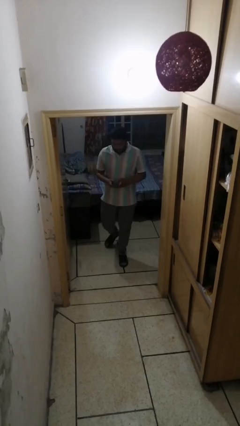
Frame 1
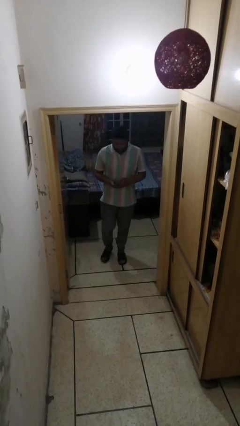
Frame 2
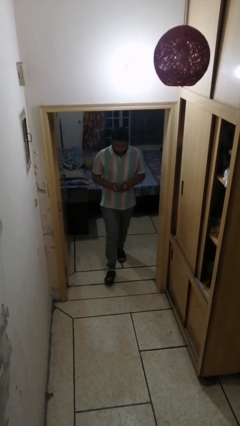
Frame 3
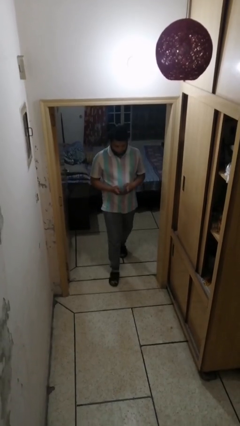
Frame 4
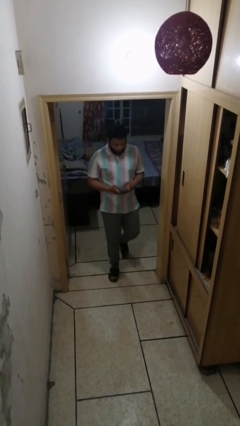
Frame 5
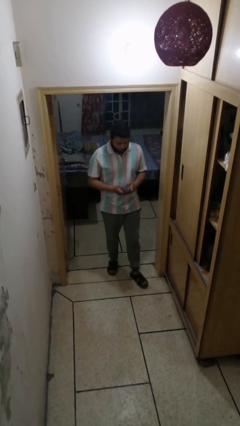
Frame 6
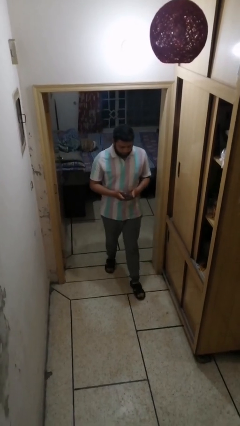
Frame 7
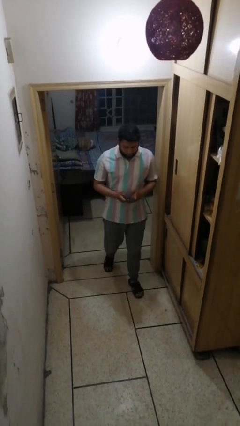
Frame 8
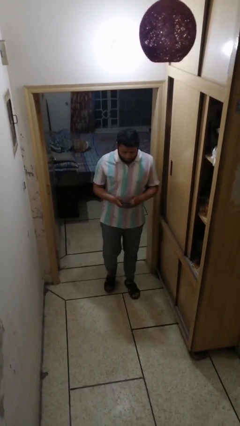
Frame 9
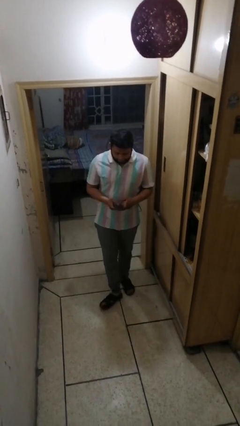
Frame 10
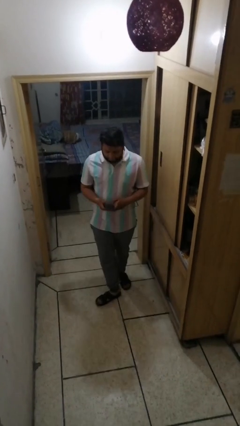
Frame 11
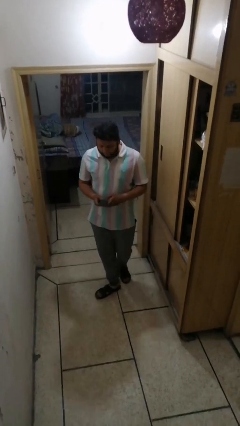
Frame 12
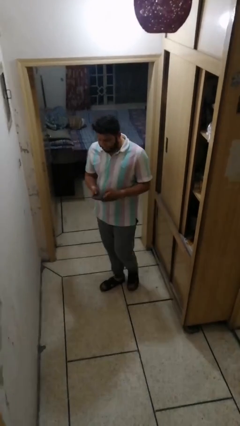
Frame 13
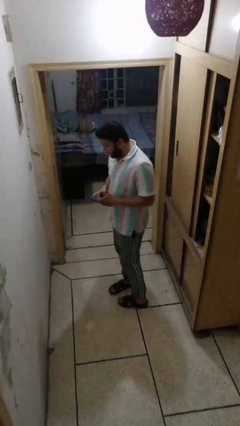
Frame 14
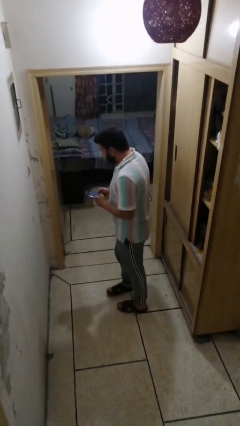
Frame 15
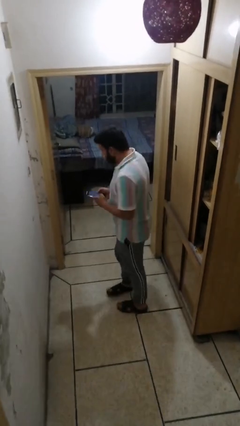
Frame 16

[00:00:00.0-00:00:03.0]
person enters scene through structure

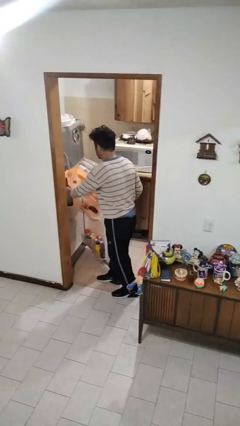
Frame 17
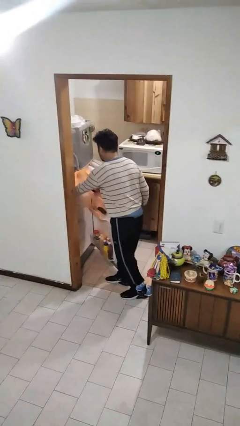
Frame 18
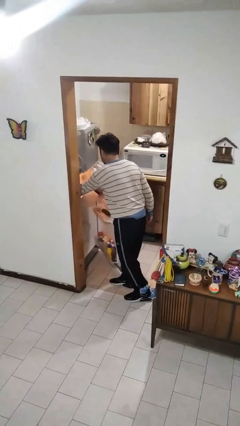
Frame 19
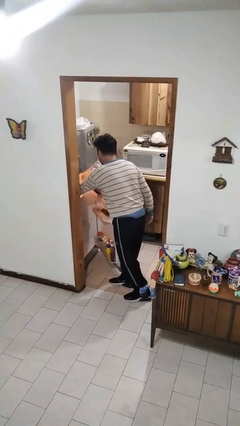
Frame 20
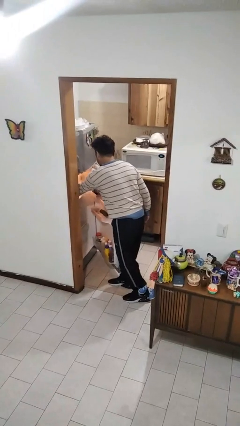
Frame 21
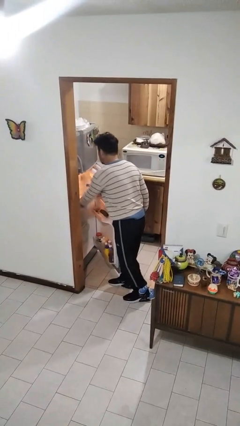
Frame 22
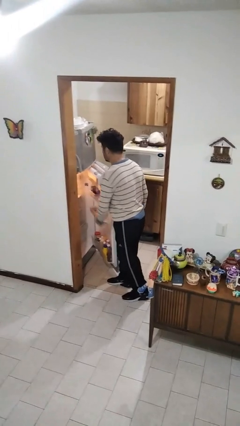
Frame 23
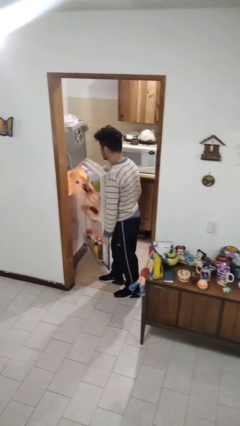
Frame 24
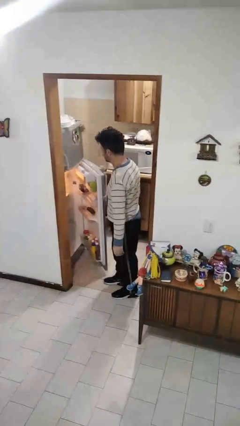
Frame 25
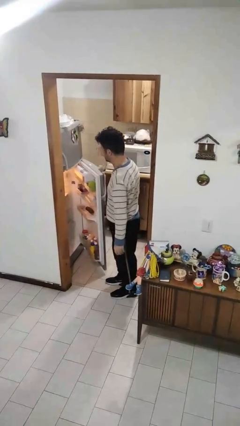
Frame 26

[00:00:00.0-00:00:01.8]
person puts object into refrigerator

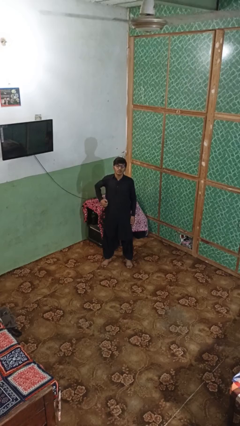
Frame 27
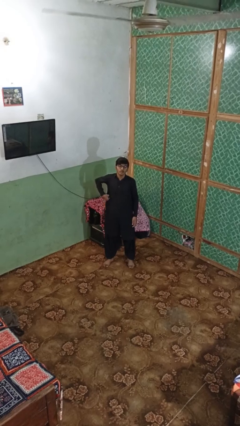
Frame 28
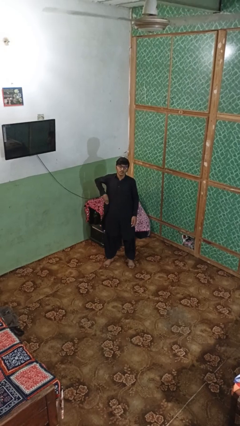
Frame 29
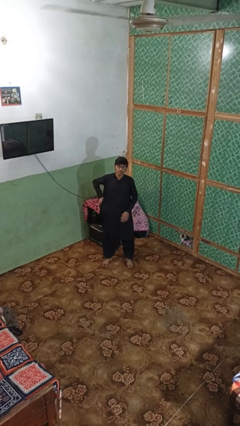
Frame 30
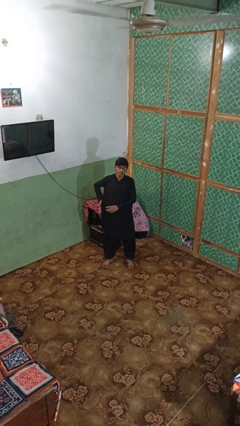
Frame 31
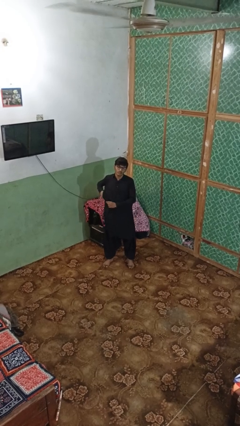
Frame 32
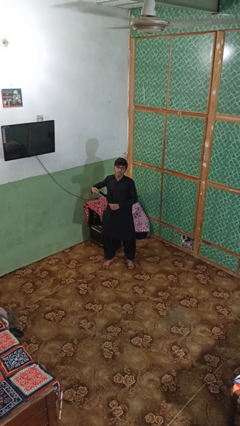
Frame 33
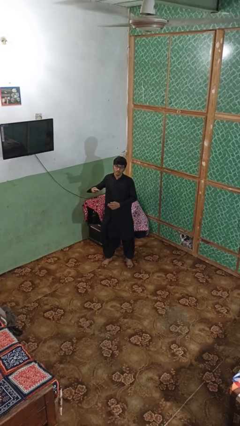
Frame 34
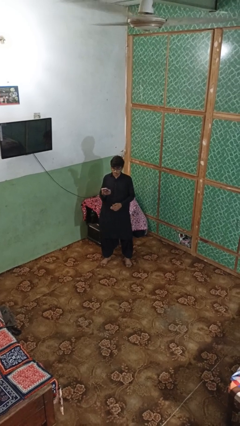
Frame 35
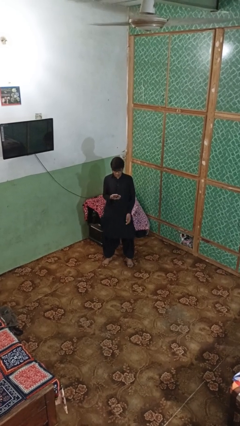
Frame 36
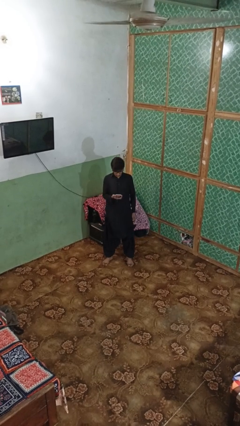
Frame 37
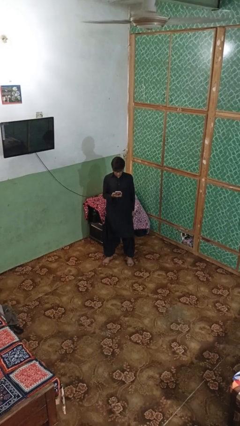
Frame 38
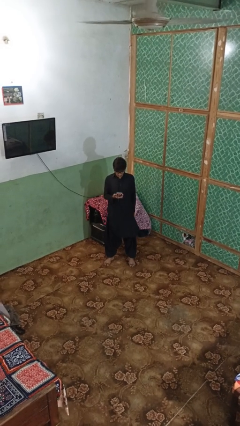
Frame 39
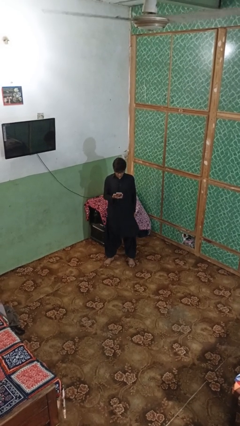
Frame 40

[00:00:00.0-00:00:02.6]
person takes phone from pocket

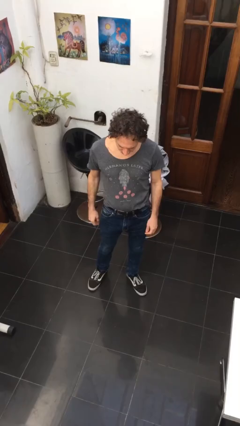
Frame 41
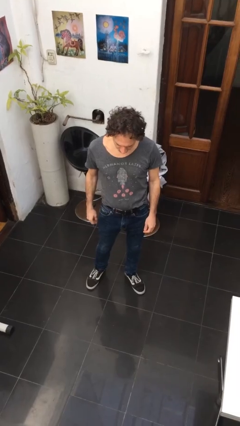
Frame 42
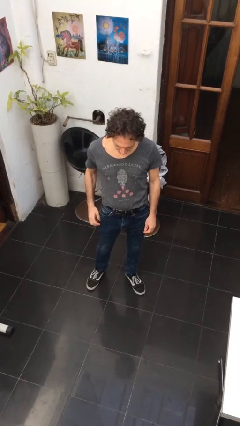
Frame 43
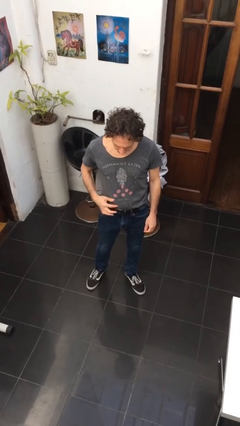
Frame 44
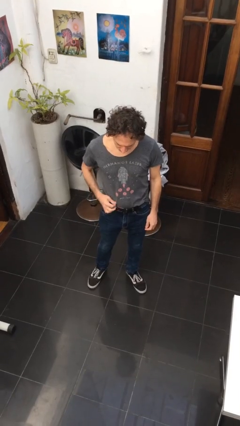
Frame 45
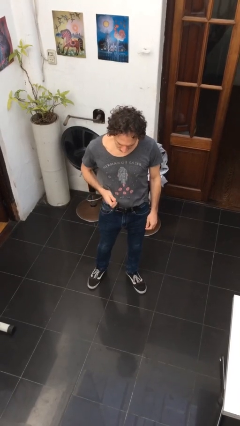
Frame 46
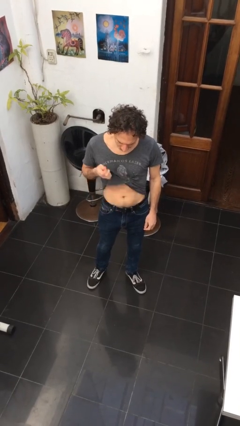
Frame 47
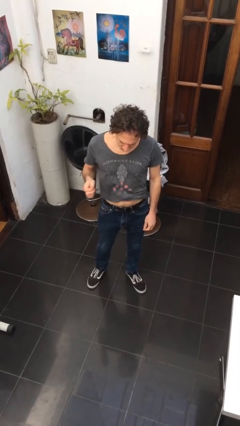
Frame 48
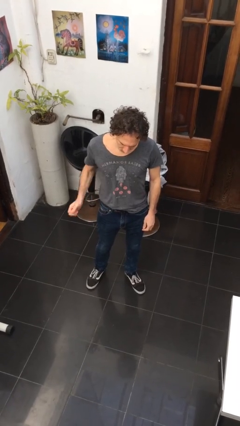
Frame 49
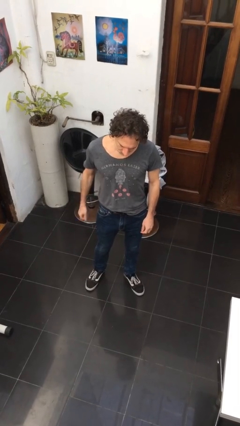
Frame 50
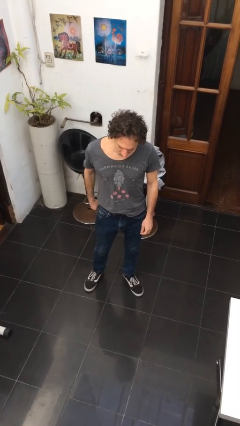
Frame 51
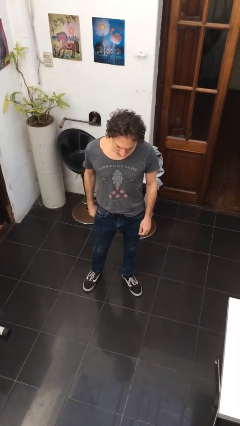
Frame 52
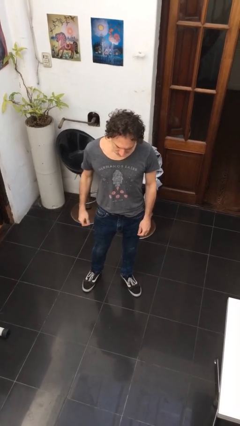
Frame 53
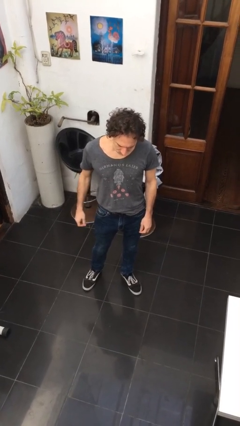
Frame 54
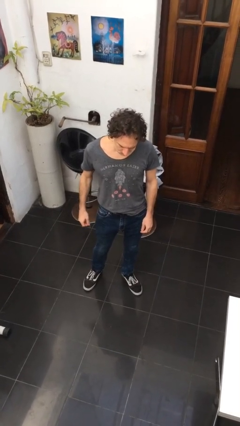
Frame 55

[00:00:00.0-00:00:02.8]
person untucks shirt

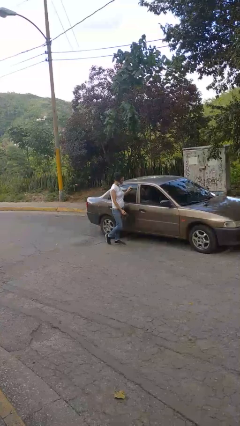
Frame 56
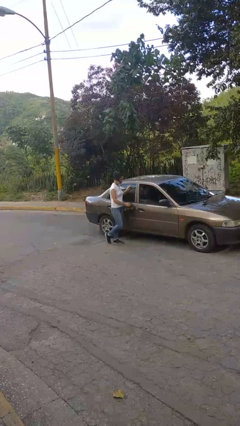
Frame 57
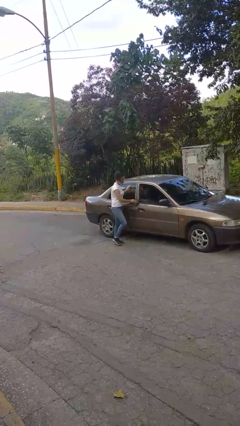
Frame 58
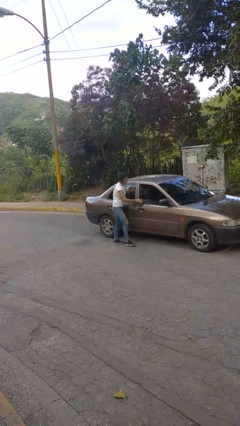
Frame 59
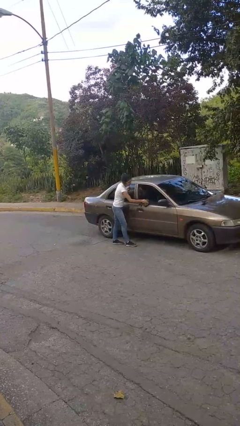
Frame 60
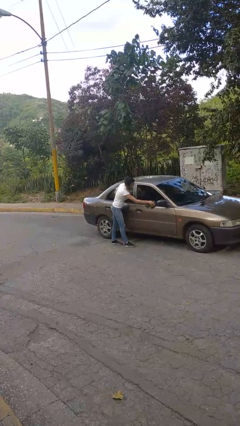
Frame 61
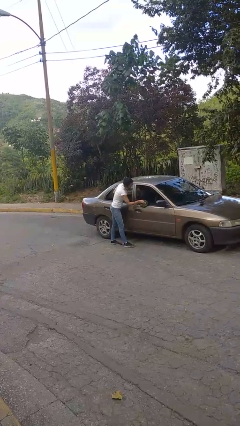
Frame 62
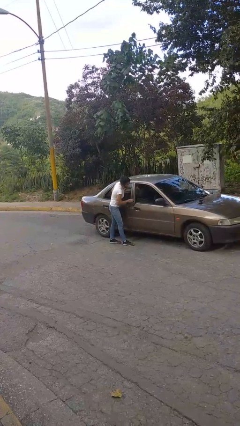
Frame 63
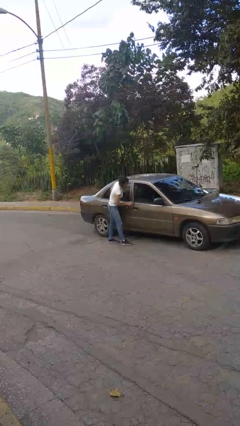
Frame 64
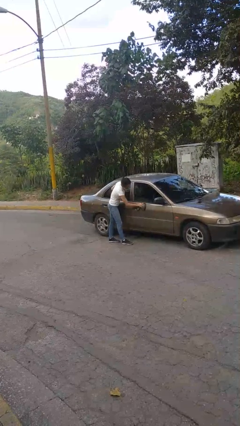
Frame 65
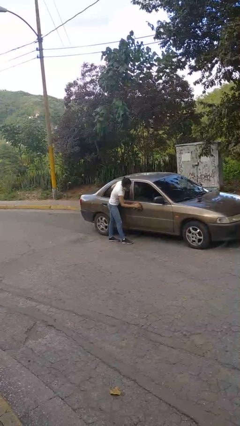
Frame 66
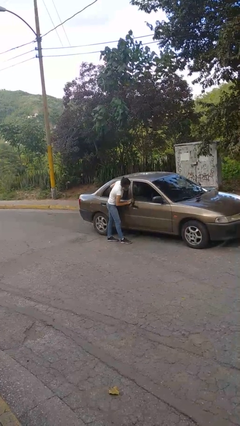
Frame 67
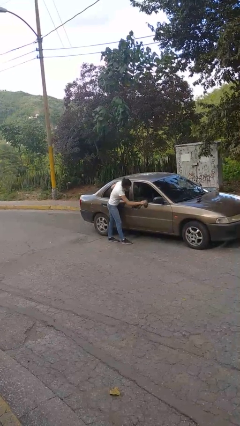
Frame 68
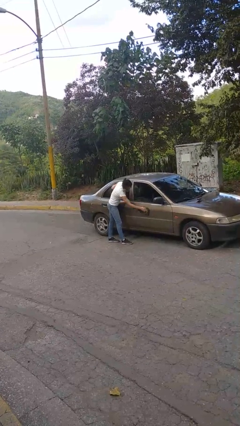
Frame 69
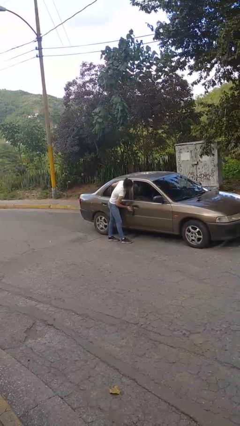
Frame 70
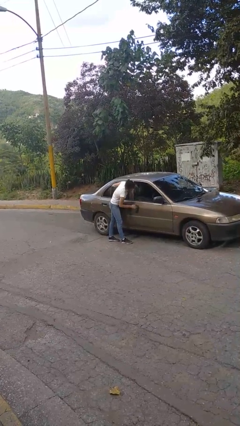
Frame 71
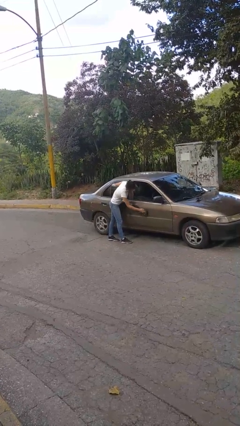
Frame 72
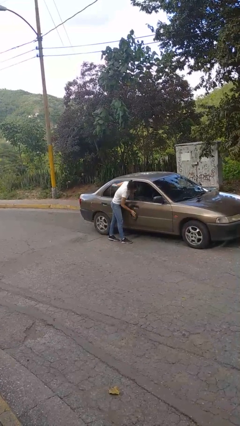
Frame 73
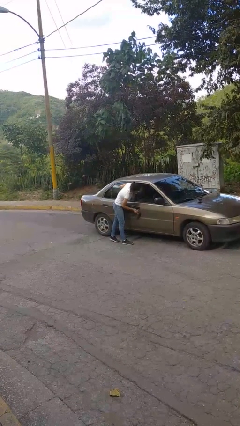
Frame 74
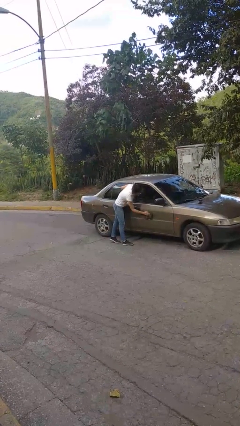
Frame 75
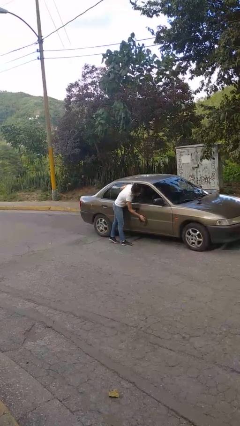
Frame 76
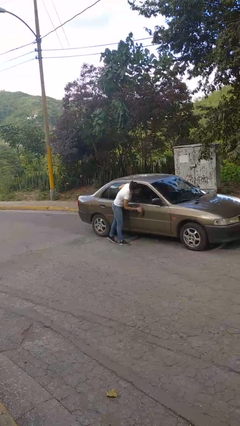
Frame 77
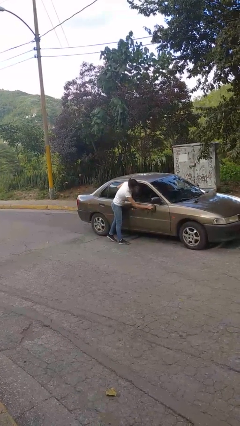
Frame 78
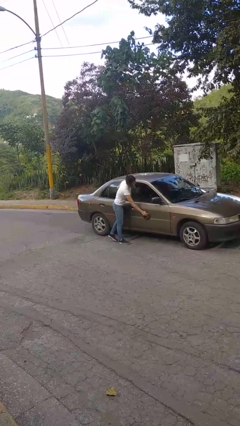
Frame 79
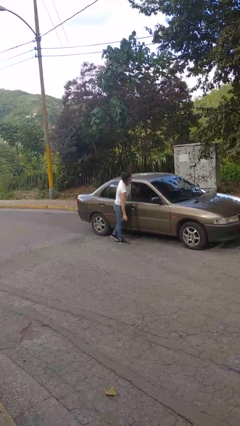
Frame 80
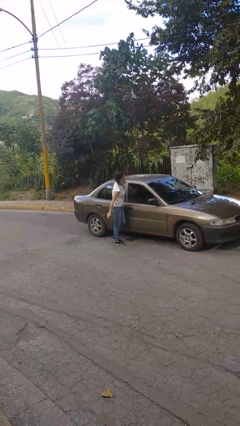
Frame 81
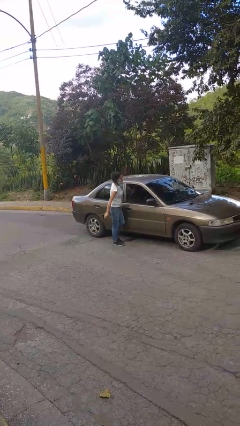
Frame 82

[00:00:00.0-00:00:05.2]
person polishes car with rag

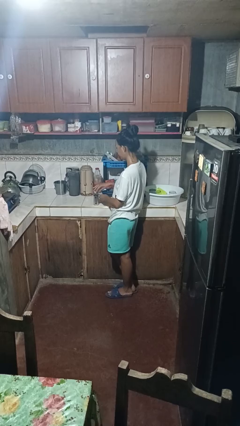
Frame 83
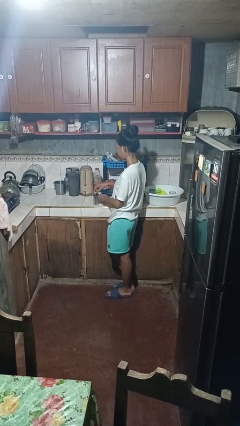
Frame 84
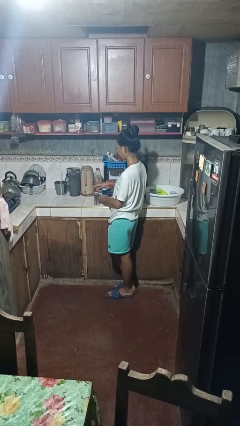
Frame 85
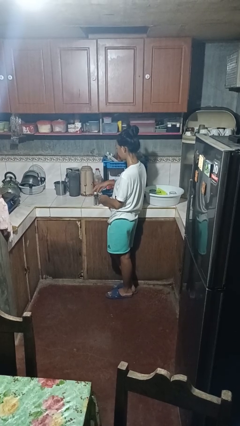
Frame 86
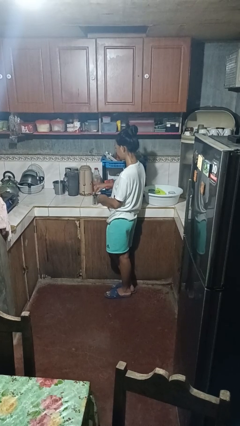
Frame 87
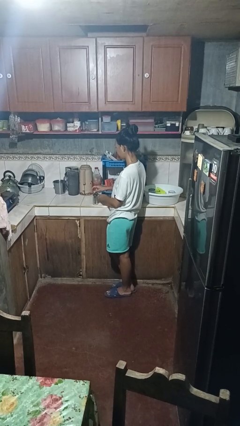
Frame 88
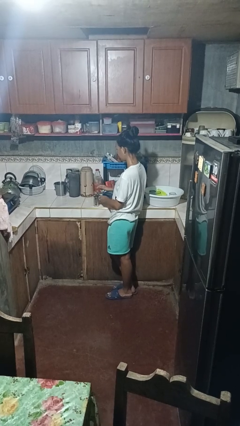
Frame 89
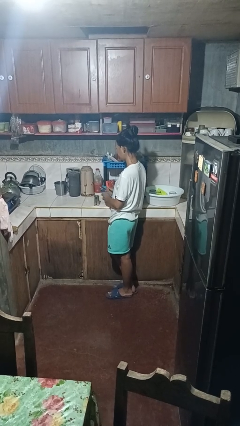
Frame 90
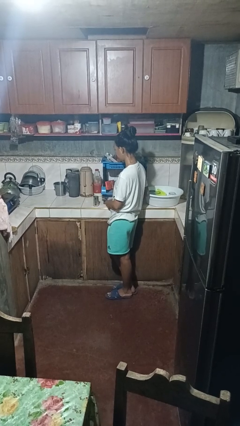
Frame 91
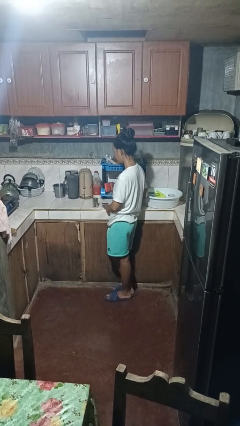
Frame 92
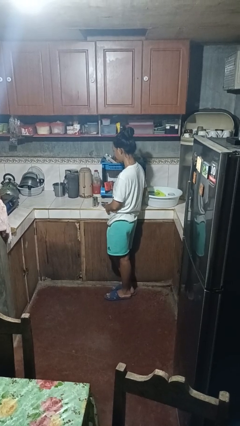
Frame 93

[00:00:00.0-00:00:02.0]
person opens can with can opener
